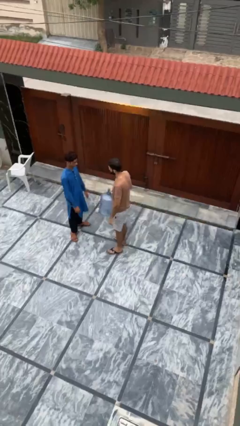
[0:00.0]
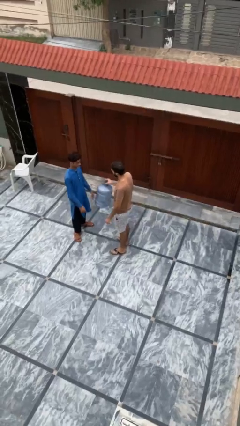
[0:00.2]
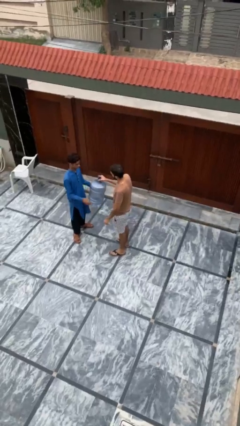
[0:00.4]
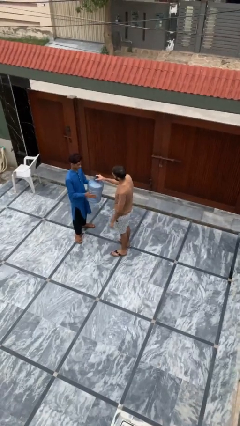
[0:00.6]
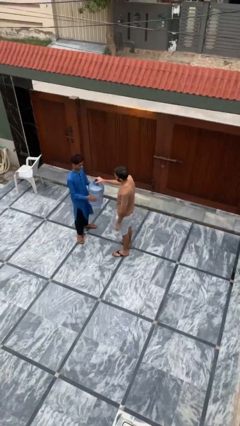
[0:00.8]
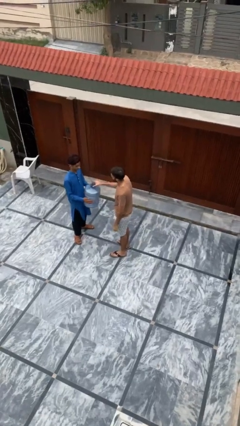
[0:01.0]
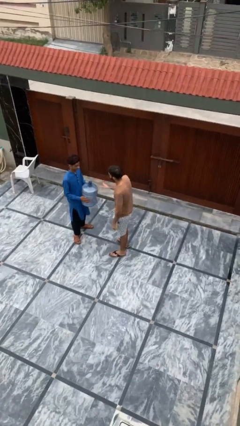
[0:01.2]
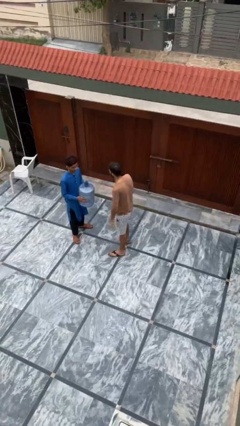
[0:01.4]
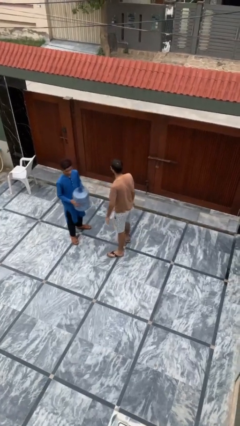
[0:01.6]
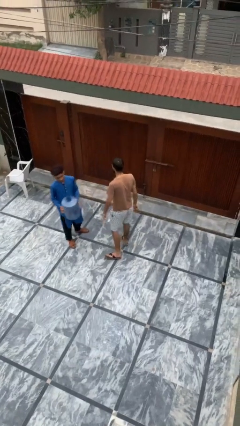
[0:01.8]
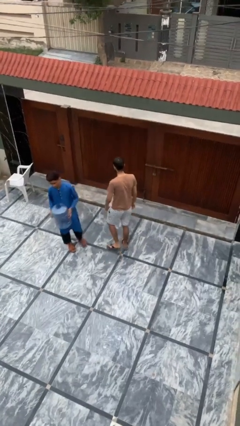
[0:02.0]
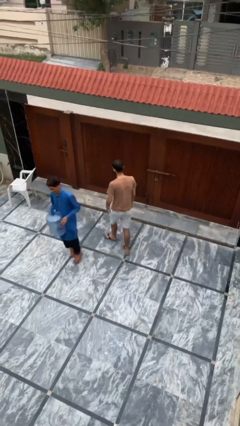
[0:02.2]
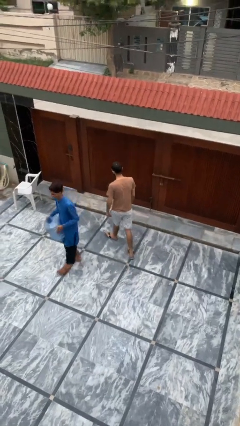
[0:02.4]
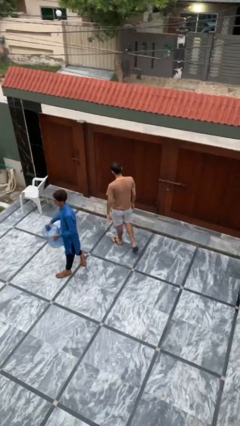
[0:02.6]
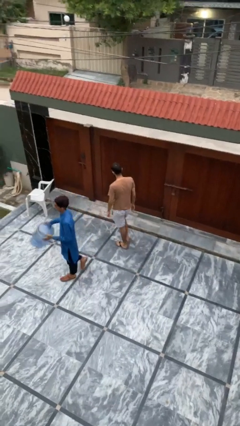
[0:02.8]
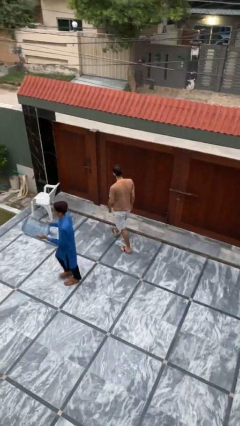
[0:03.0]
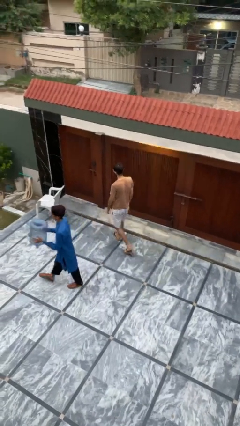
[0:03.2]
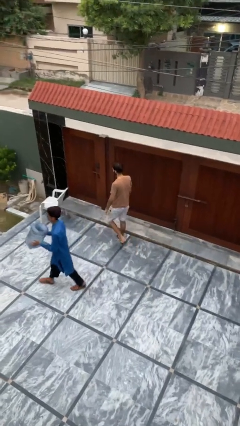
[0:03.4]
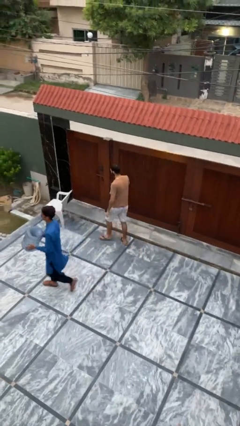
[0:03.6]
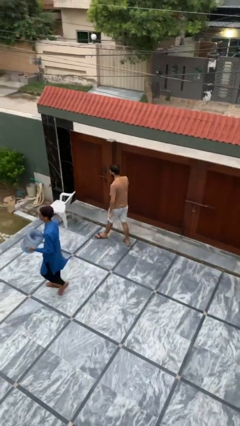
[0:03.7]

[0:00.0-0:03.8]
person transfers object to person

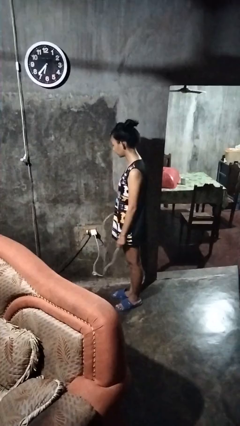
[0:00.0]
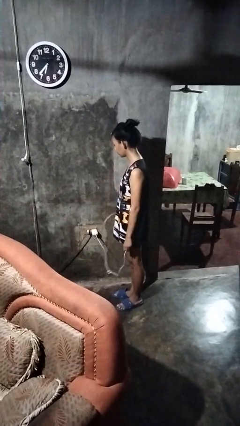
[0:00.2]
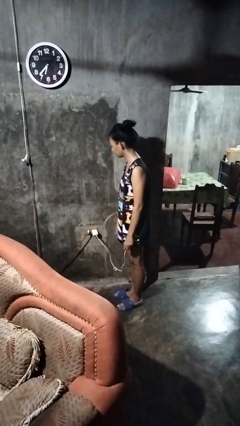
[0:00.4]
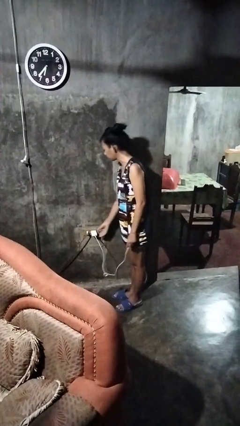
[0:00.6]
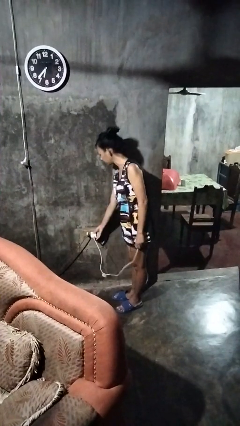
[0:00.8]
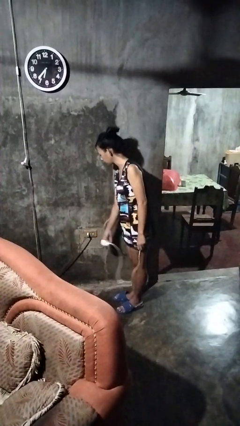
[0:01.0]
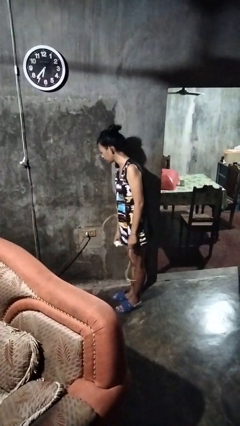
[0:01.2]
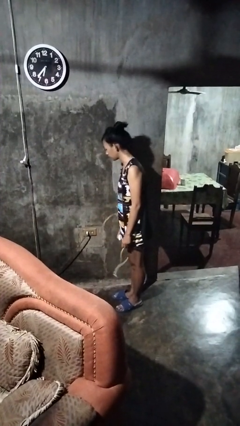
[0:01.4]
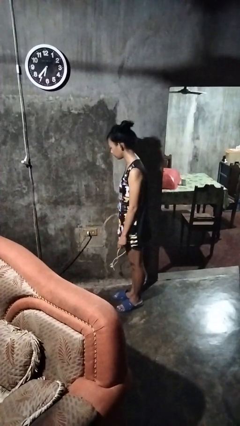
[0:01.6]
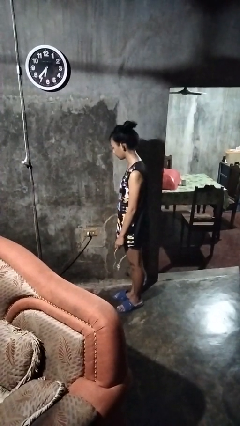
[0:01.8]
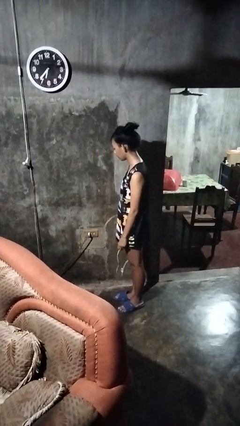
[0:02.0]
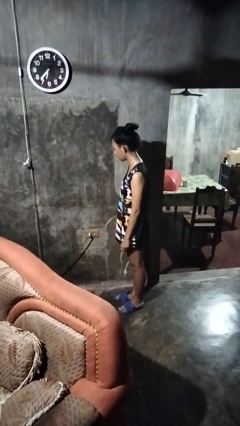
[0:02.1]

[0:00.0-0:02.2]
person unplugs from electrical socket

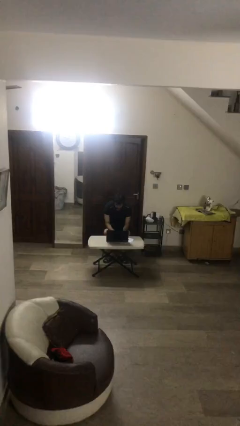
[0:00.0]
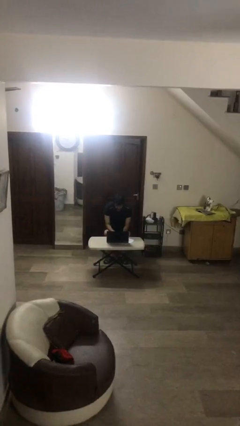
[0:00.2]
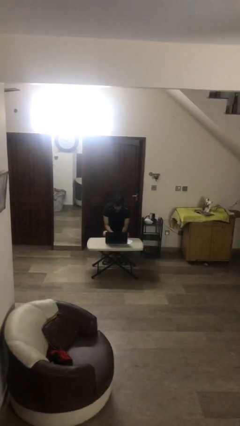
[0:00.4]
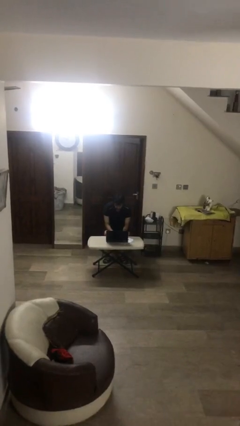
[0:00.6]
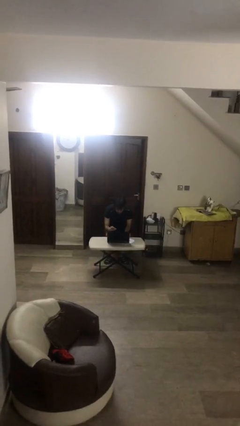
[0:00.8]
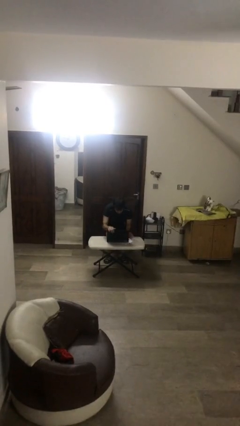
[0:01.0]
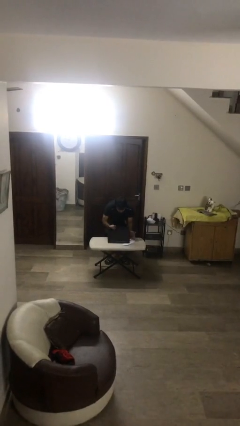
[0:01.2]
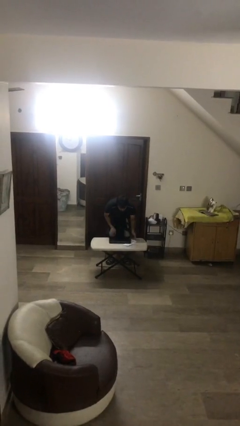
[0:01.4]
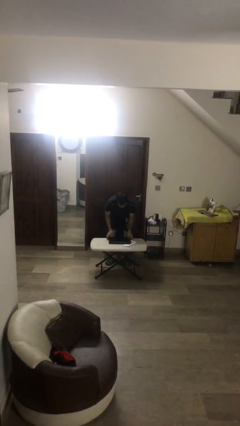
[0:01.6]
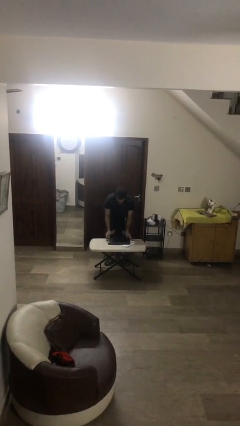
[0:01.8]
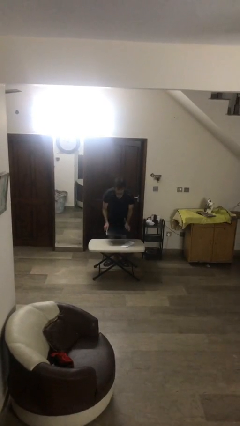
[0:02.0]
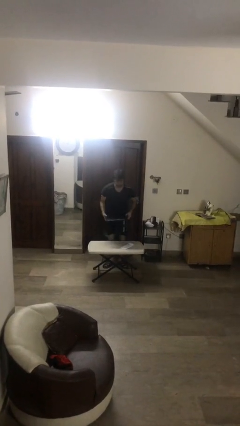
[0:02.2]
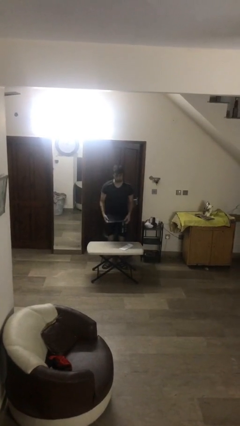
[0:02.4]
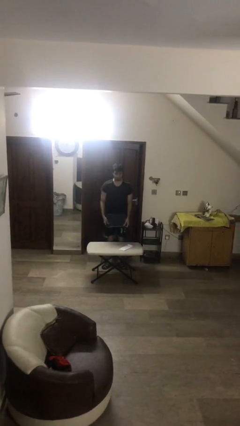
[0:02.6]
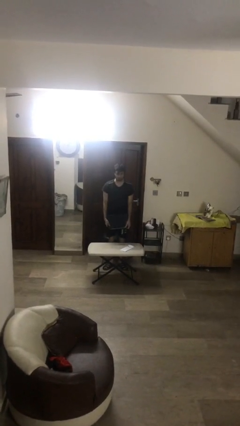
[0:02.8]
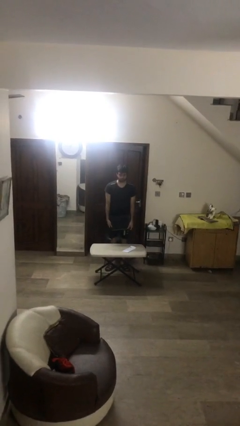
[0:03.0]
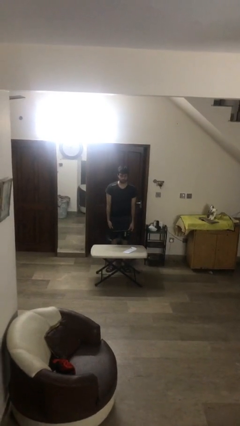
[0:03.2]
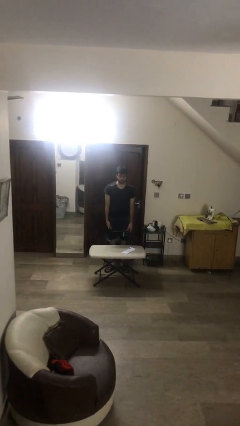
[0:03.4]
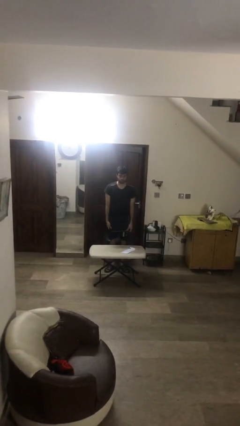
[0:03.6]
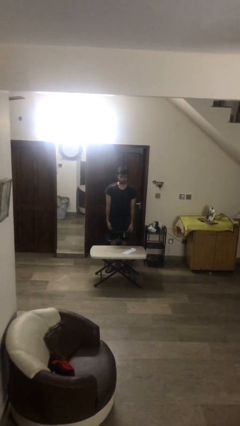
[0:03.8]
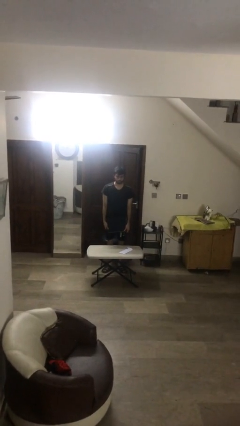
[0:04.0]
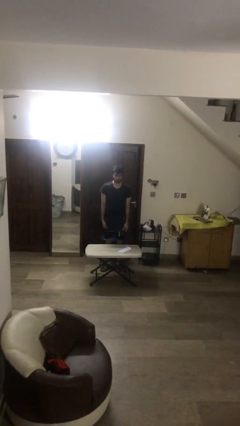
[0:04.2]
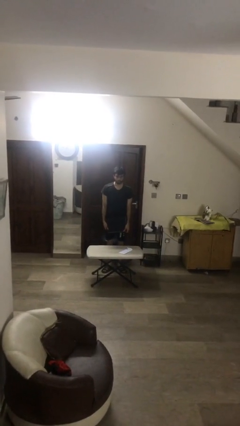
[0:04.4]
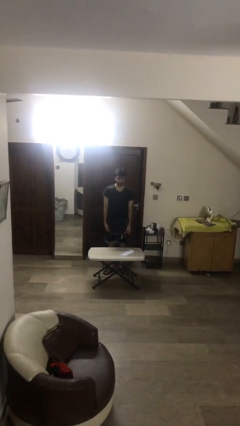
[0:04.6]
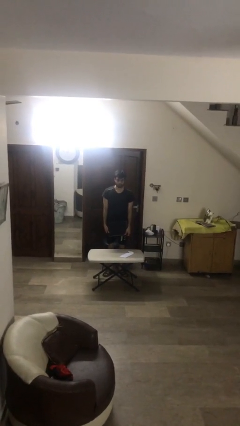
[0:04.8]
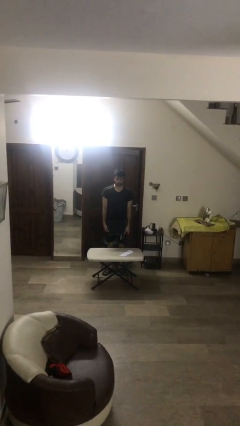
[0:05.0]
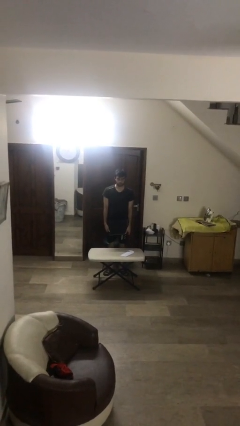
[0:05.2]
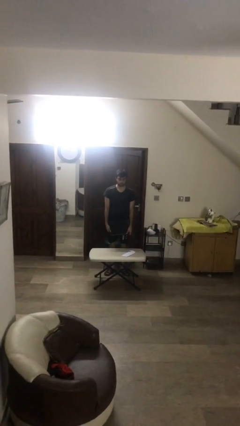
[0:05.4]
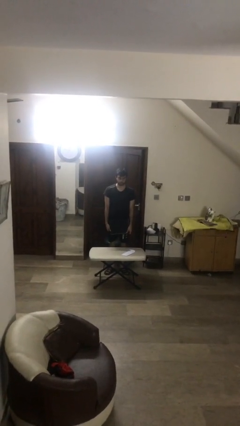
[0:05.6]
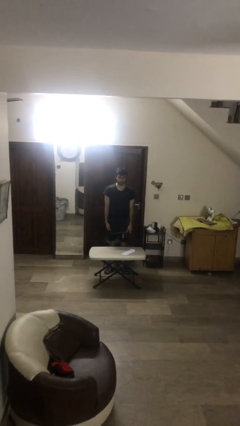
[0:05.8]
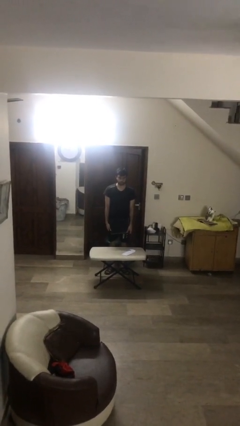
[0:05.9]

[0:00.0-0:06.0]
person stands up

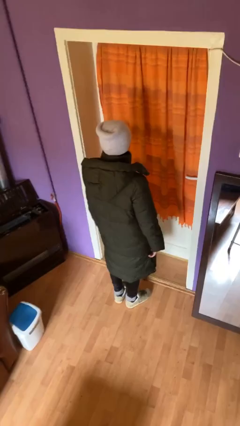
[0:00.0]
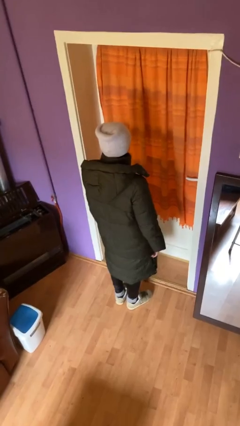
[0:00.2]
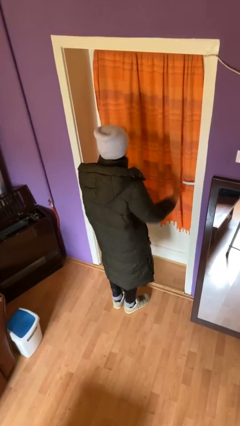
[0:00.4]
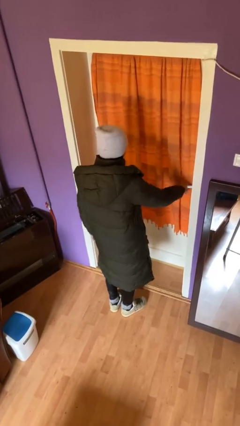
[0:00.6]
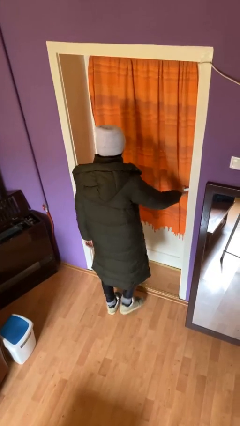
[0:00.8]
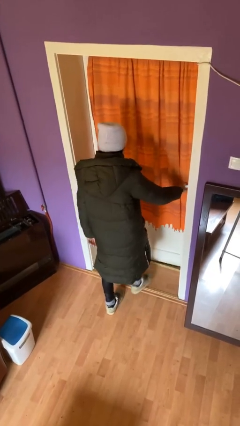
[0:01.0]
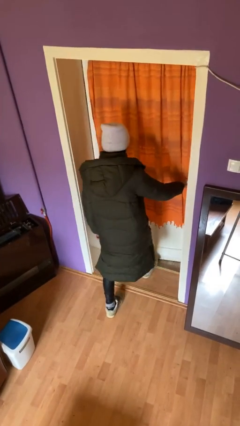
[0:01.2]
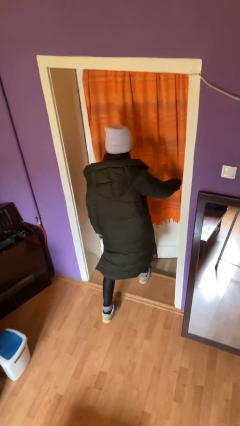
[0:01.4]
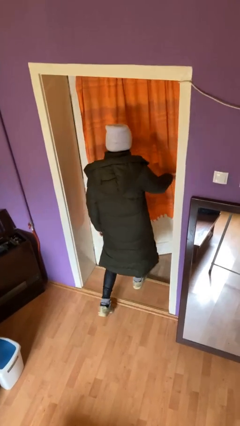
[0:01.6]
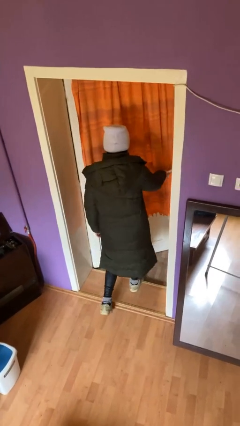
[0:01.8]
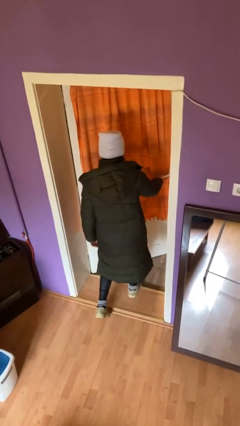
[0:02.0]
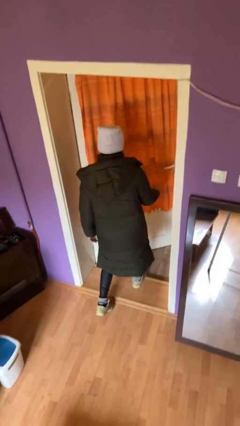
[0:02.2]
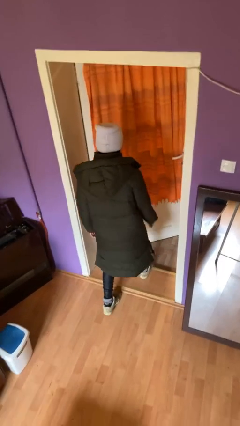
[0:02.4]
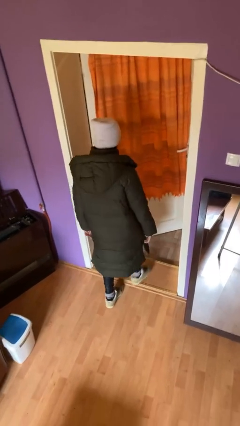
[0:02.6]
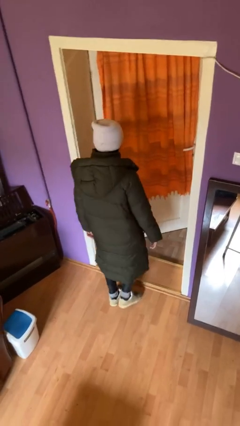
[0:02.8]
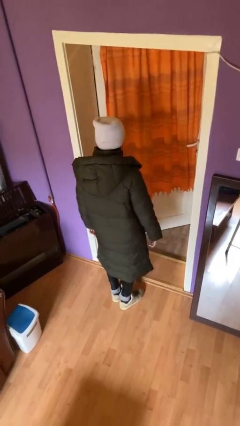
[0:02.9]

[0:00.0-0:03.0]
person opens facility door

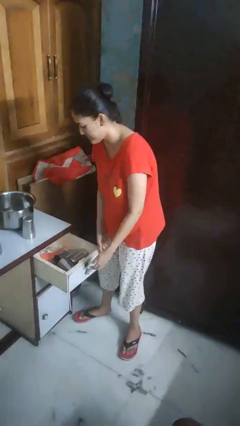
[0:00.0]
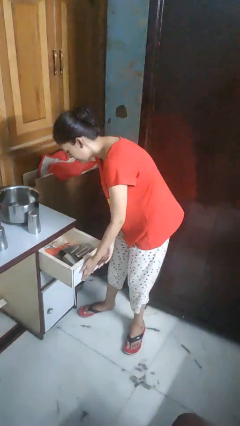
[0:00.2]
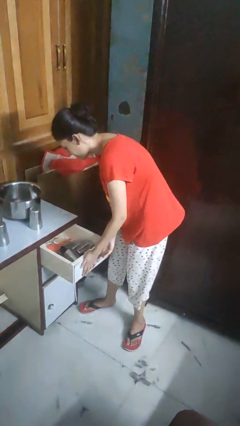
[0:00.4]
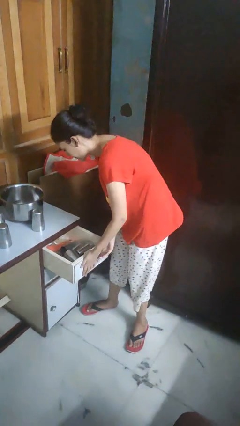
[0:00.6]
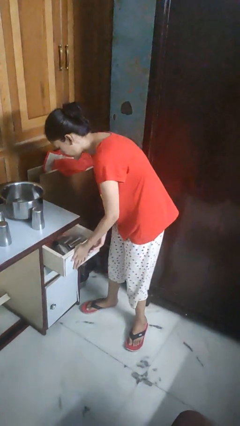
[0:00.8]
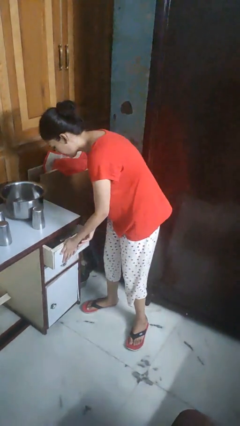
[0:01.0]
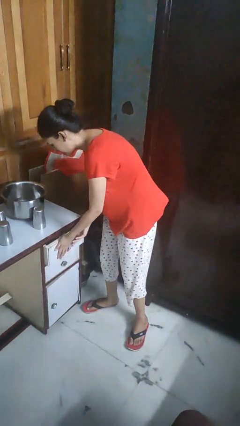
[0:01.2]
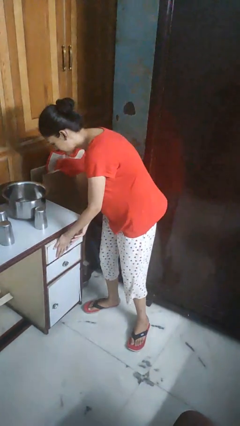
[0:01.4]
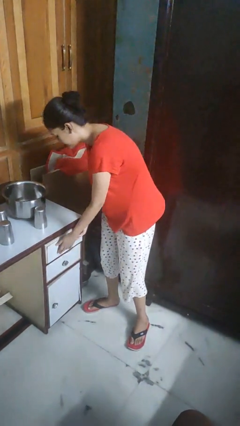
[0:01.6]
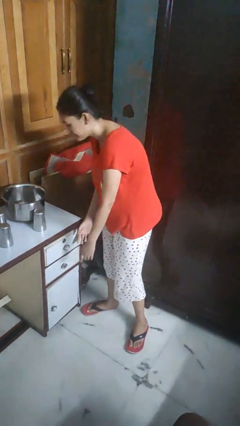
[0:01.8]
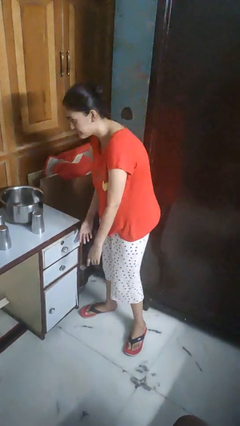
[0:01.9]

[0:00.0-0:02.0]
person closes kitchen drawer

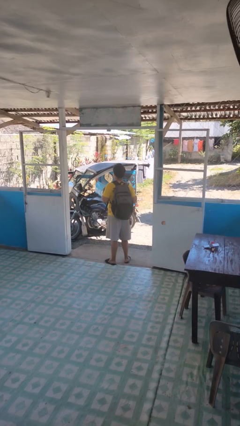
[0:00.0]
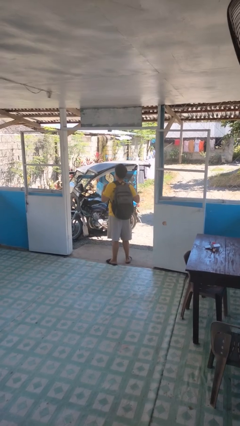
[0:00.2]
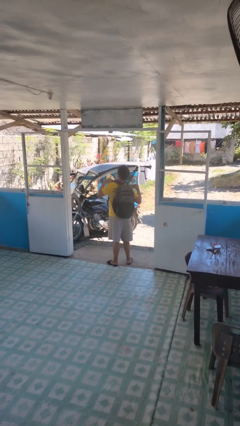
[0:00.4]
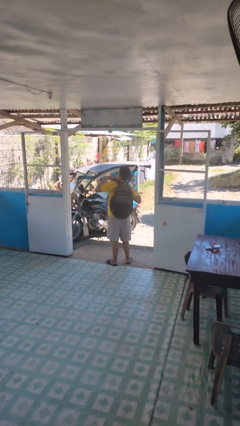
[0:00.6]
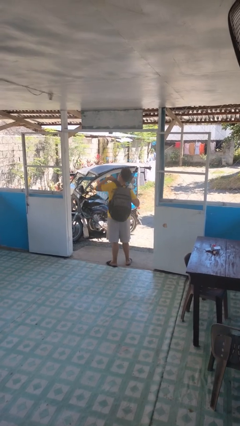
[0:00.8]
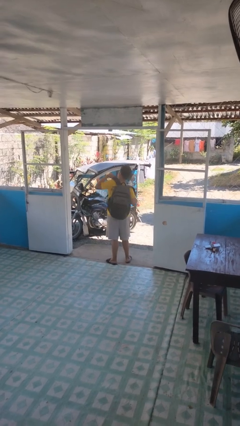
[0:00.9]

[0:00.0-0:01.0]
person takes off backpack
